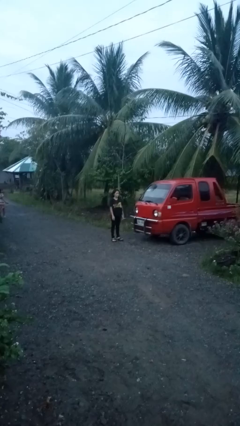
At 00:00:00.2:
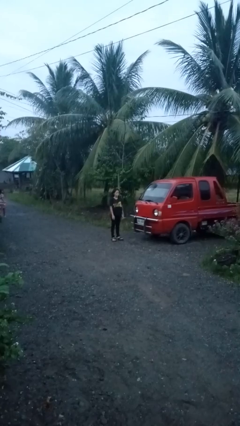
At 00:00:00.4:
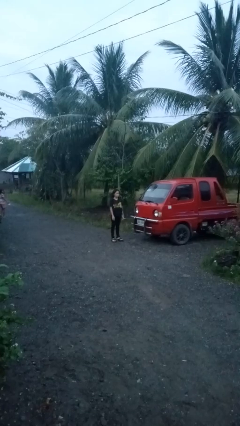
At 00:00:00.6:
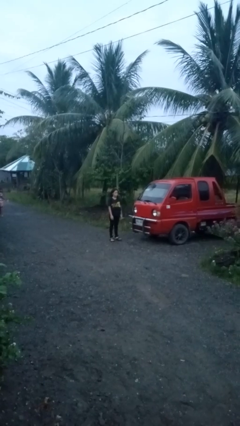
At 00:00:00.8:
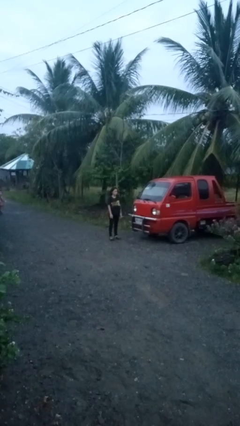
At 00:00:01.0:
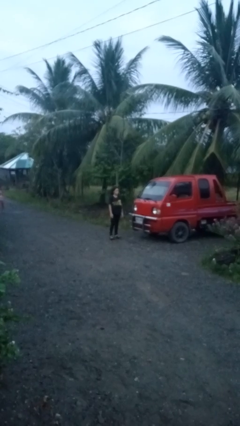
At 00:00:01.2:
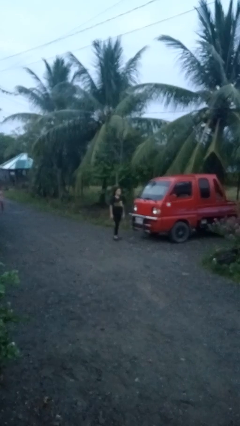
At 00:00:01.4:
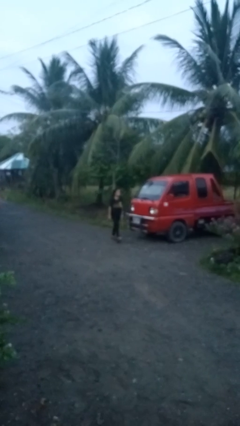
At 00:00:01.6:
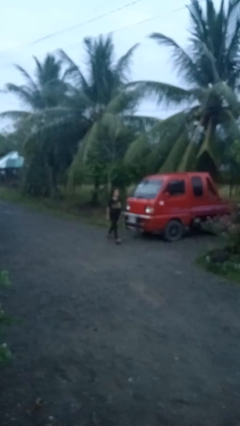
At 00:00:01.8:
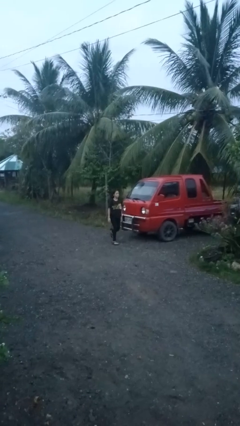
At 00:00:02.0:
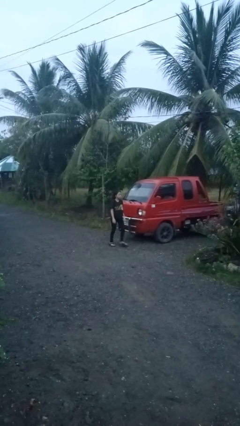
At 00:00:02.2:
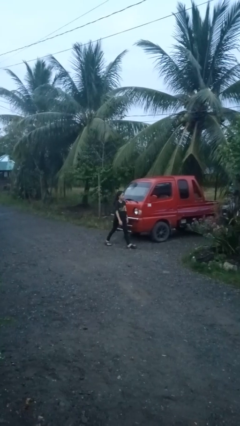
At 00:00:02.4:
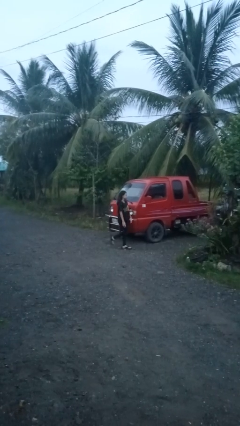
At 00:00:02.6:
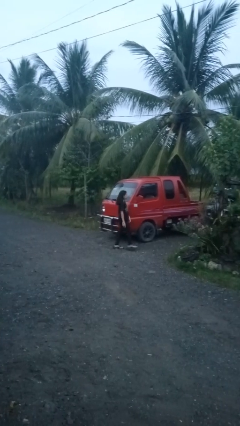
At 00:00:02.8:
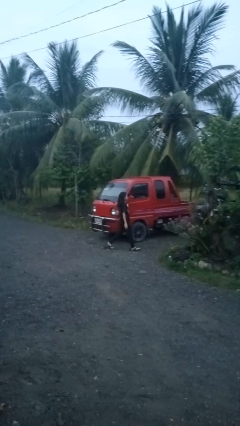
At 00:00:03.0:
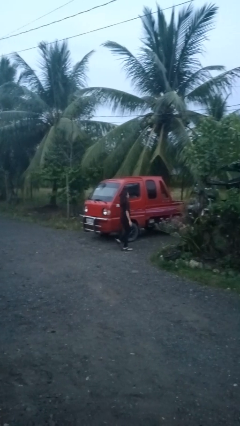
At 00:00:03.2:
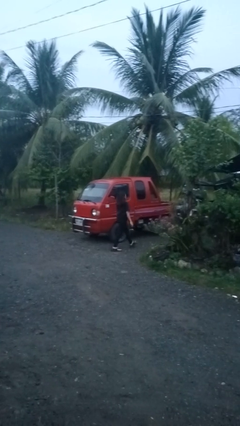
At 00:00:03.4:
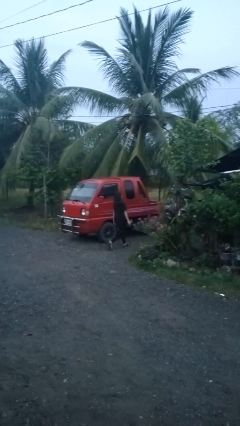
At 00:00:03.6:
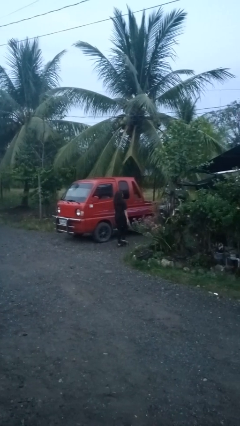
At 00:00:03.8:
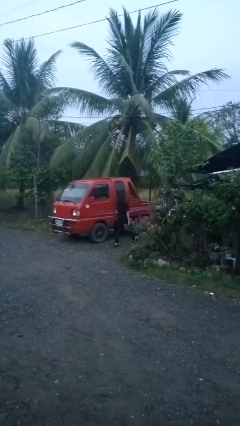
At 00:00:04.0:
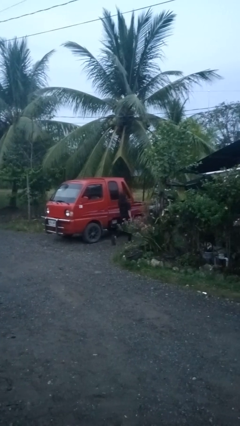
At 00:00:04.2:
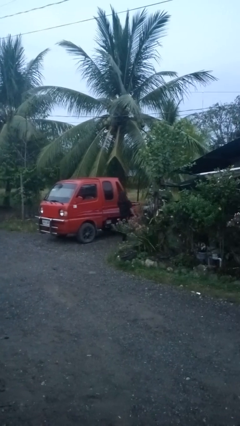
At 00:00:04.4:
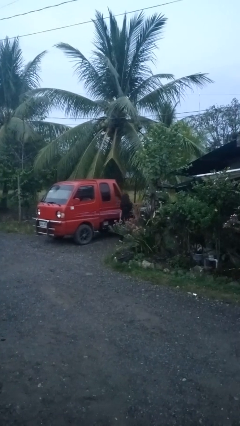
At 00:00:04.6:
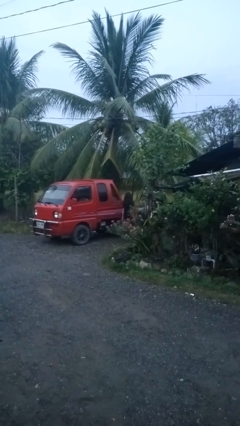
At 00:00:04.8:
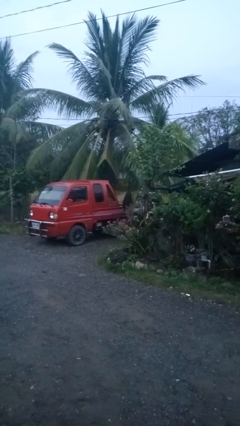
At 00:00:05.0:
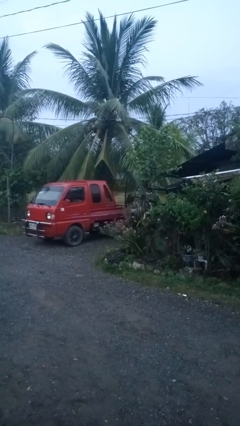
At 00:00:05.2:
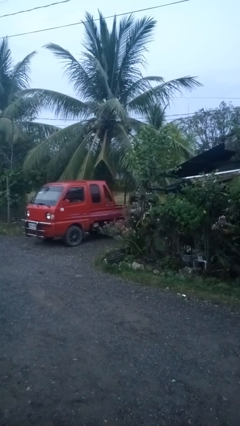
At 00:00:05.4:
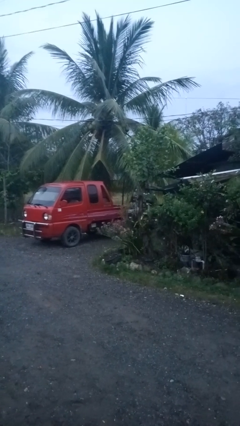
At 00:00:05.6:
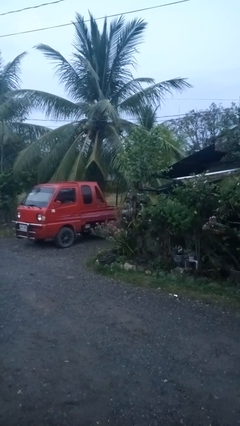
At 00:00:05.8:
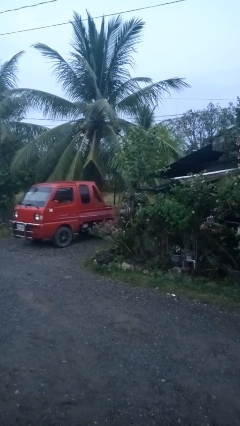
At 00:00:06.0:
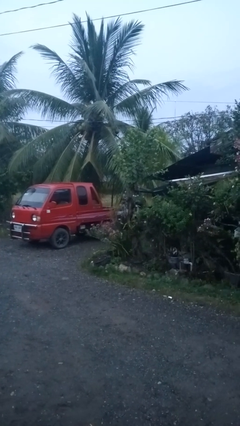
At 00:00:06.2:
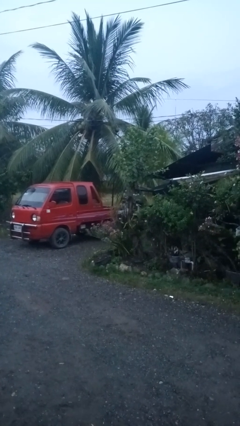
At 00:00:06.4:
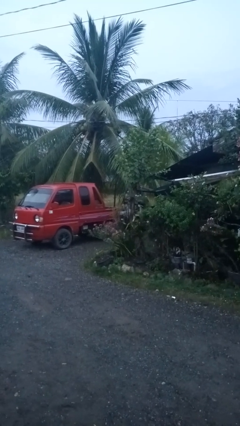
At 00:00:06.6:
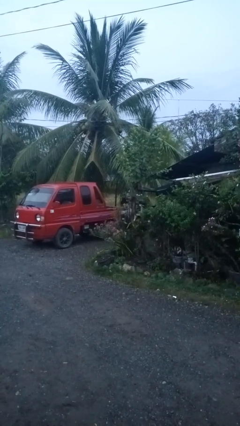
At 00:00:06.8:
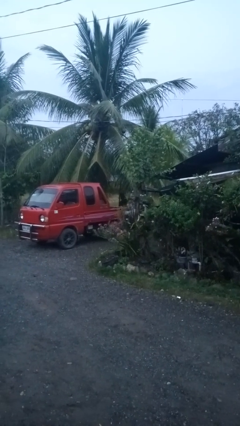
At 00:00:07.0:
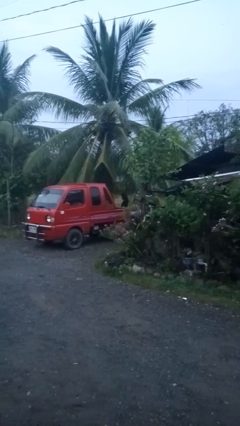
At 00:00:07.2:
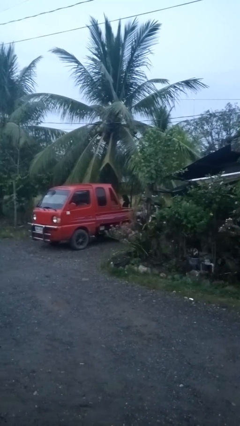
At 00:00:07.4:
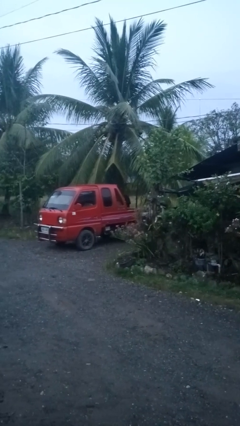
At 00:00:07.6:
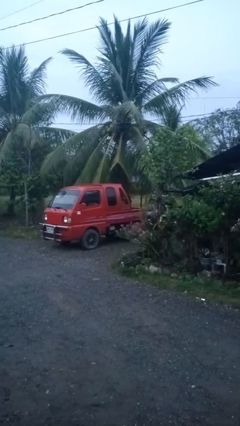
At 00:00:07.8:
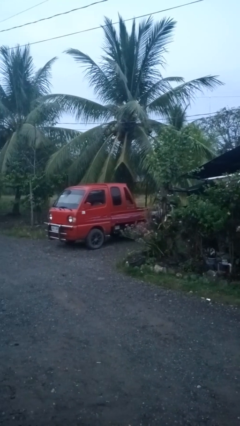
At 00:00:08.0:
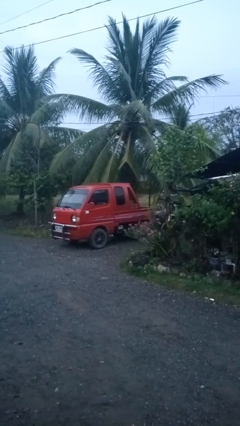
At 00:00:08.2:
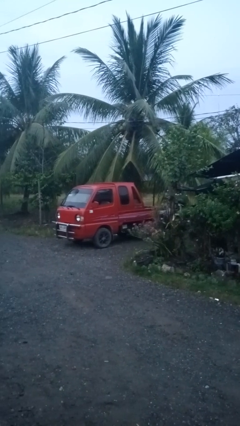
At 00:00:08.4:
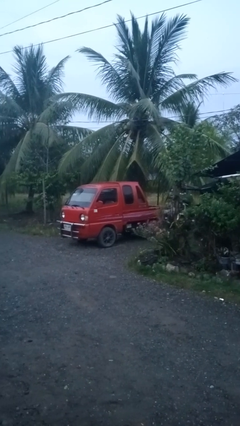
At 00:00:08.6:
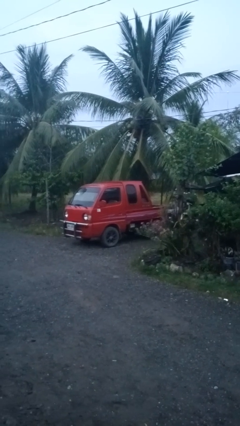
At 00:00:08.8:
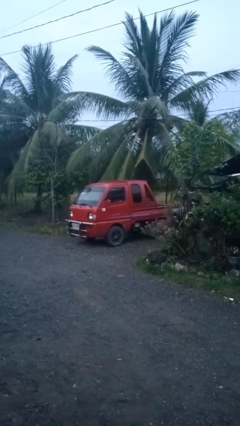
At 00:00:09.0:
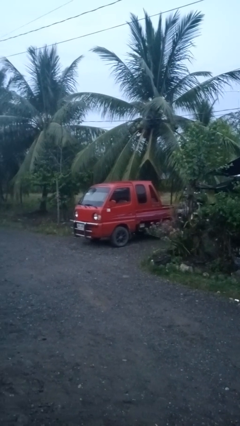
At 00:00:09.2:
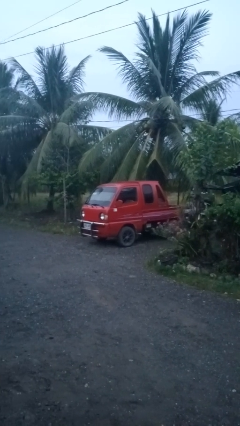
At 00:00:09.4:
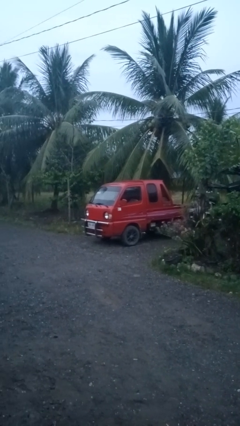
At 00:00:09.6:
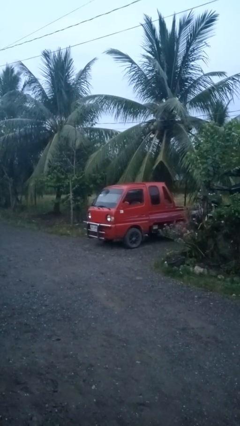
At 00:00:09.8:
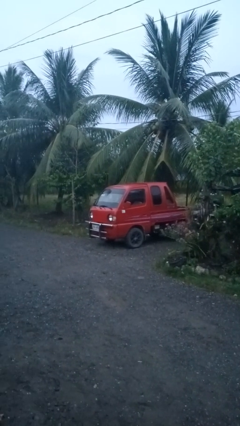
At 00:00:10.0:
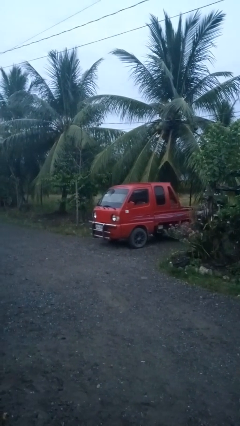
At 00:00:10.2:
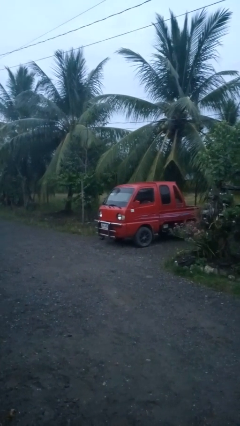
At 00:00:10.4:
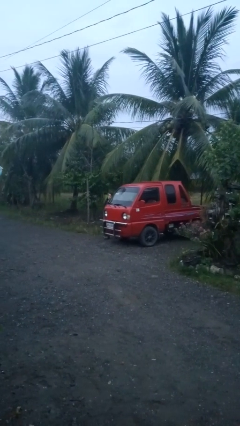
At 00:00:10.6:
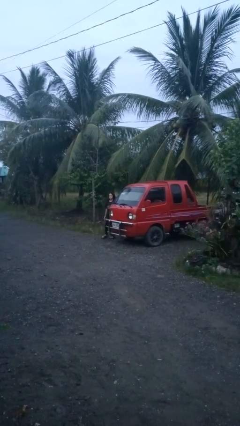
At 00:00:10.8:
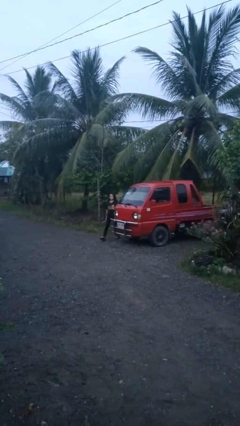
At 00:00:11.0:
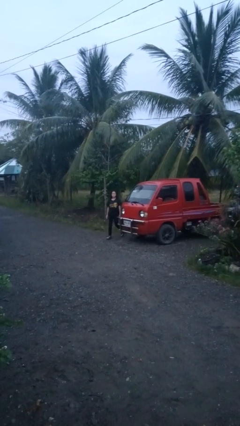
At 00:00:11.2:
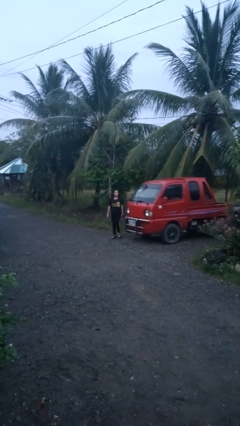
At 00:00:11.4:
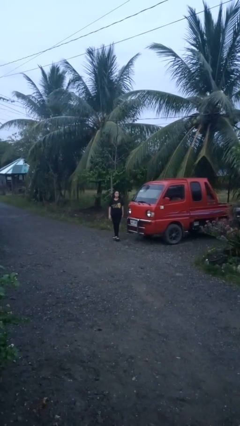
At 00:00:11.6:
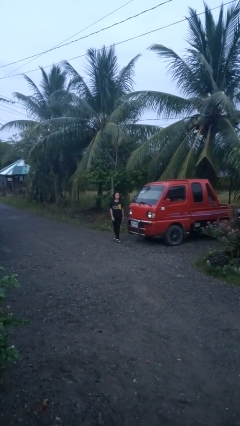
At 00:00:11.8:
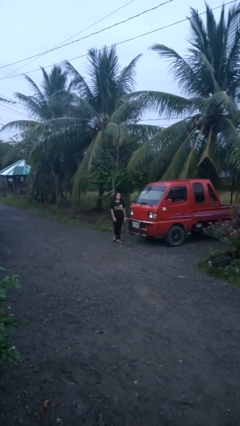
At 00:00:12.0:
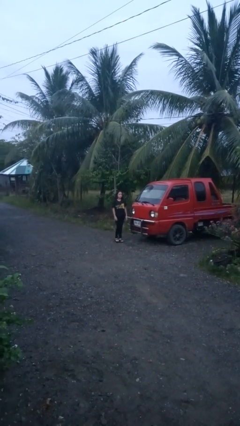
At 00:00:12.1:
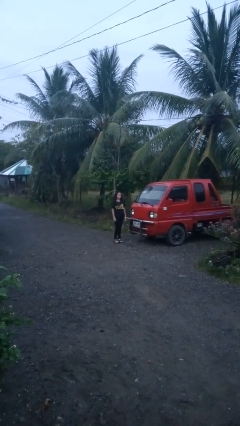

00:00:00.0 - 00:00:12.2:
person walks around car

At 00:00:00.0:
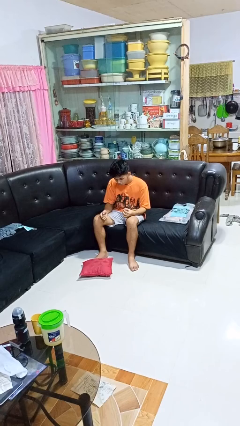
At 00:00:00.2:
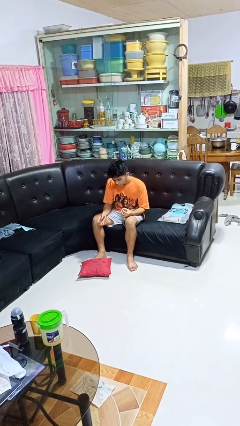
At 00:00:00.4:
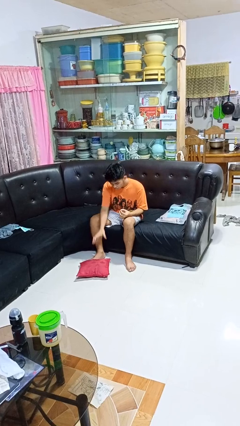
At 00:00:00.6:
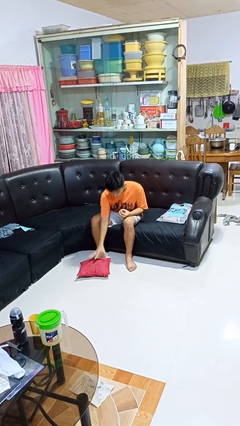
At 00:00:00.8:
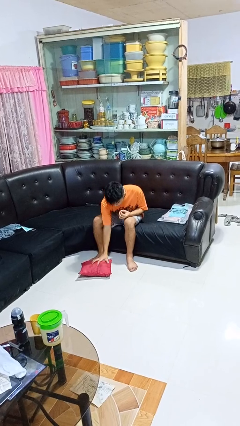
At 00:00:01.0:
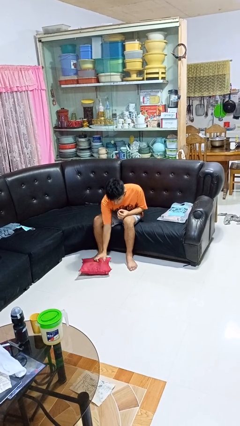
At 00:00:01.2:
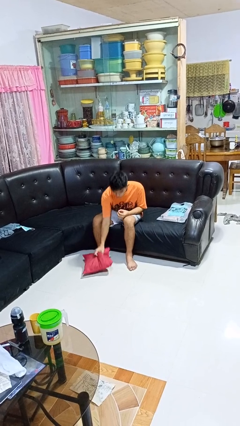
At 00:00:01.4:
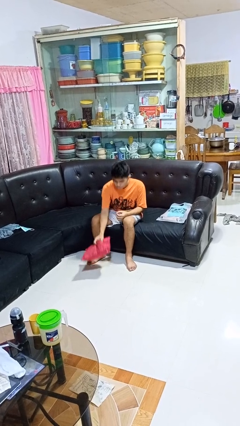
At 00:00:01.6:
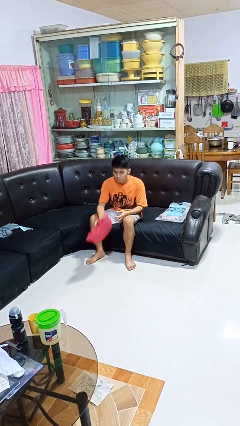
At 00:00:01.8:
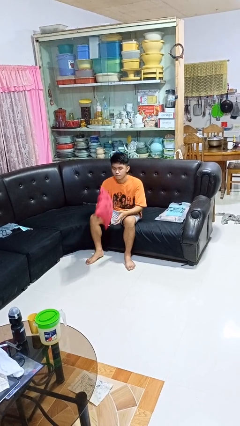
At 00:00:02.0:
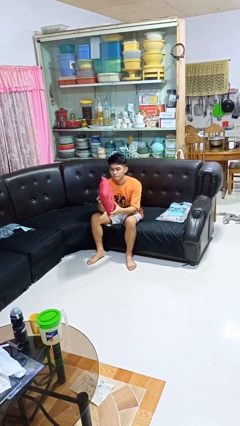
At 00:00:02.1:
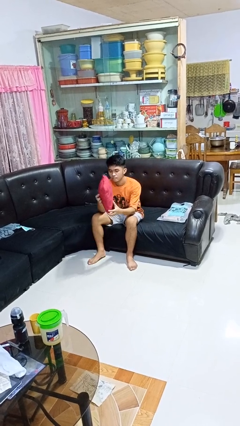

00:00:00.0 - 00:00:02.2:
person picks up object from floor

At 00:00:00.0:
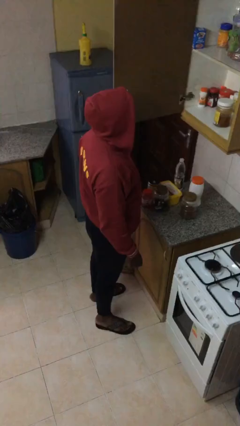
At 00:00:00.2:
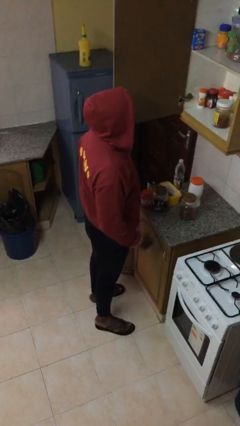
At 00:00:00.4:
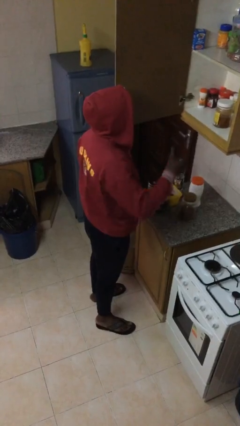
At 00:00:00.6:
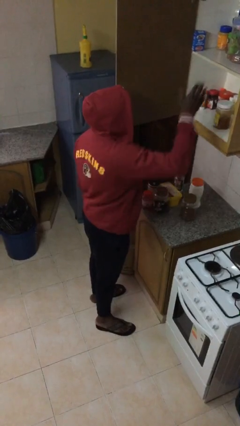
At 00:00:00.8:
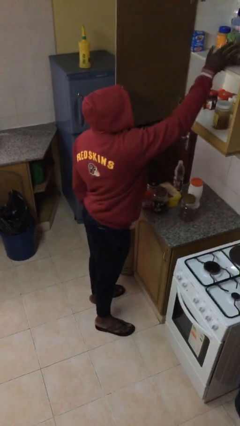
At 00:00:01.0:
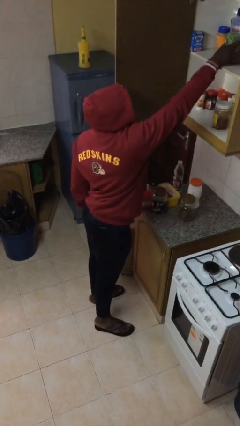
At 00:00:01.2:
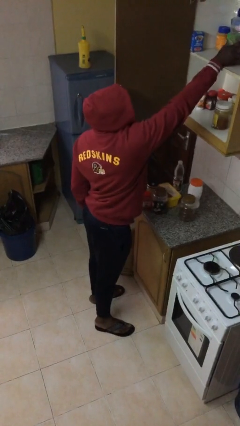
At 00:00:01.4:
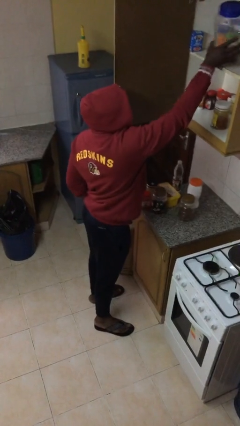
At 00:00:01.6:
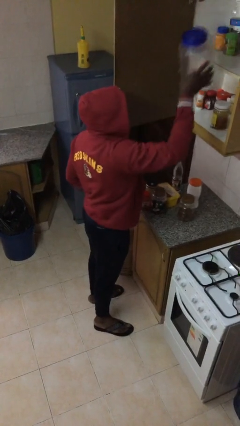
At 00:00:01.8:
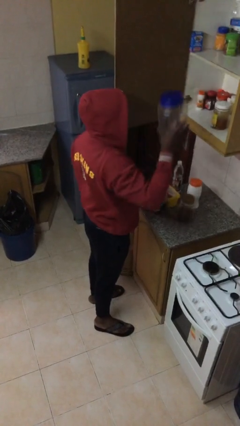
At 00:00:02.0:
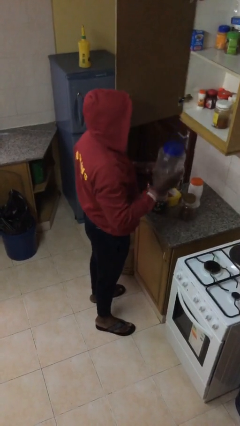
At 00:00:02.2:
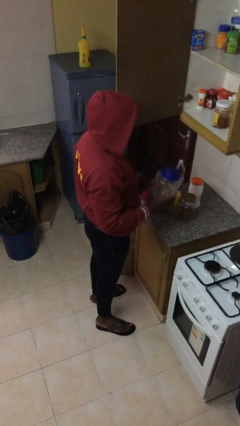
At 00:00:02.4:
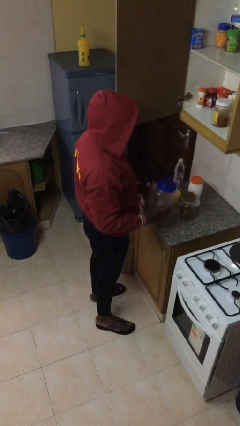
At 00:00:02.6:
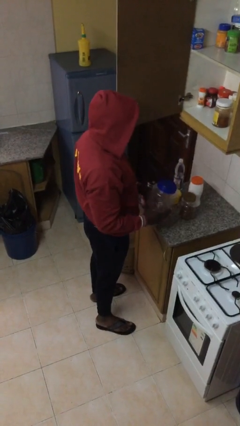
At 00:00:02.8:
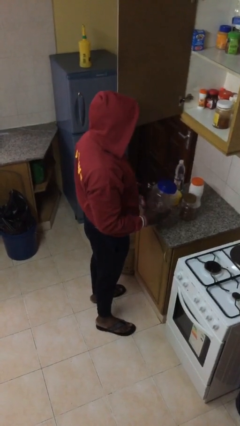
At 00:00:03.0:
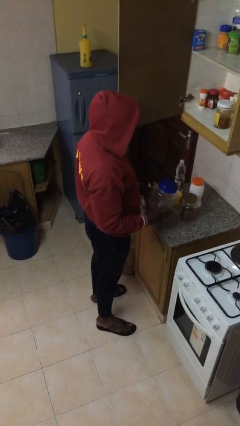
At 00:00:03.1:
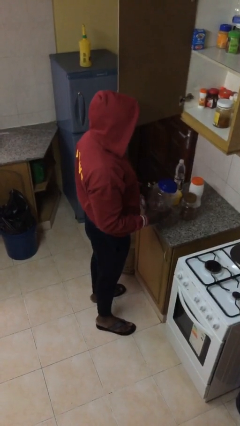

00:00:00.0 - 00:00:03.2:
person picks up object from shelf
